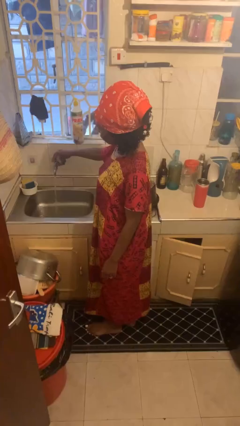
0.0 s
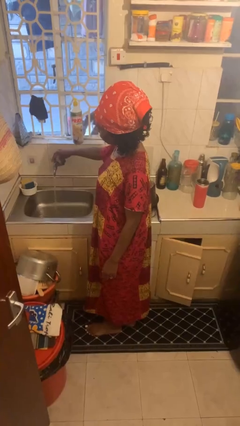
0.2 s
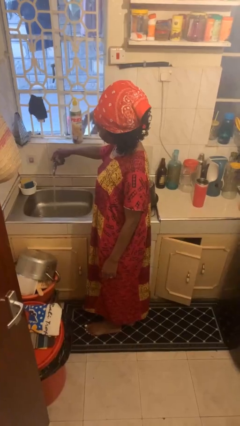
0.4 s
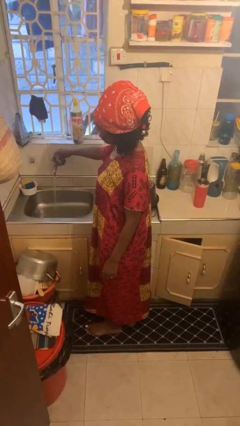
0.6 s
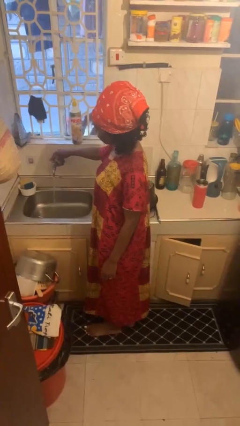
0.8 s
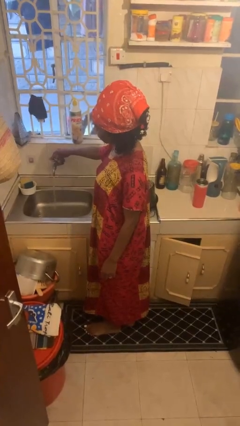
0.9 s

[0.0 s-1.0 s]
person turns on faucet

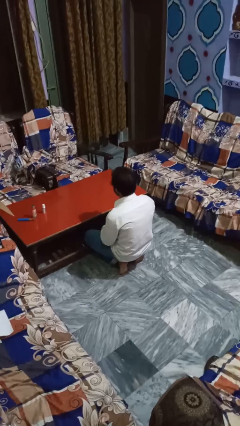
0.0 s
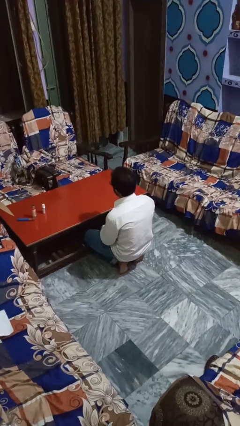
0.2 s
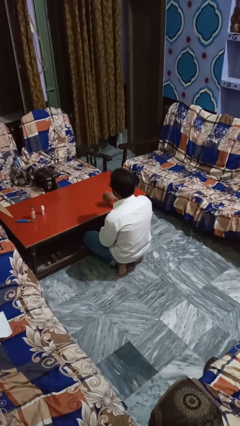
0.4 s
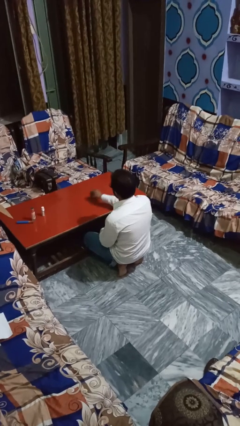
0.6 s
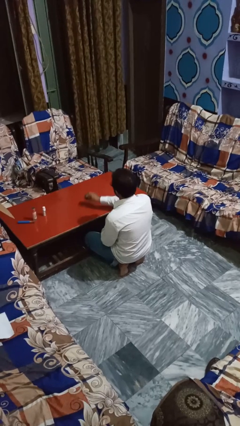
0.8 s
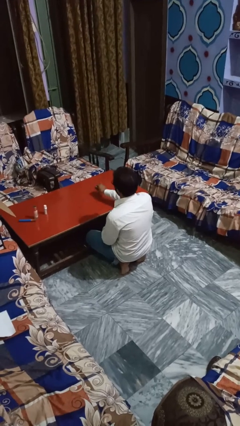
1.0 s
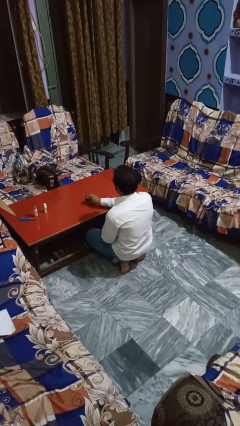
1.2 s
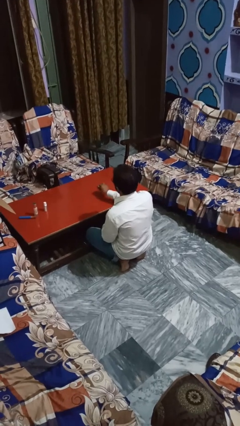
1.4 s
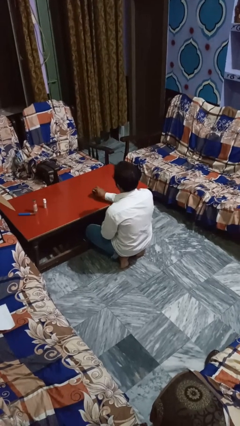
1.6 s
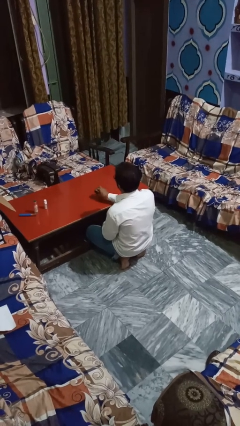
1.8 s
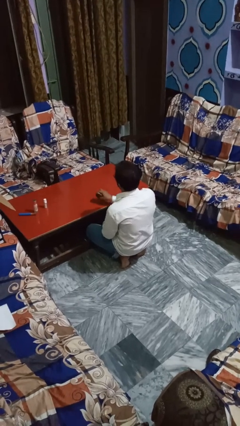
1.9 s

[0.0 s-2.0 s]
person cleans table with rag

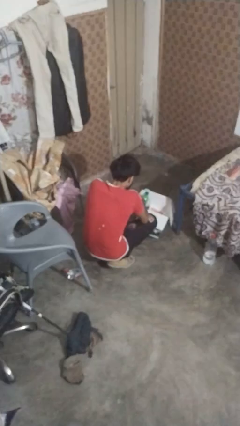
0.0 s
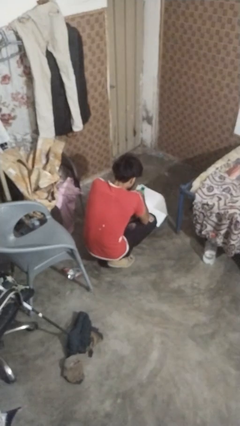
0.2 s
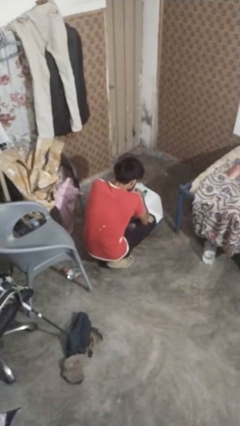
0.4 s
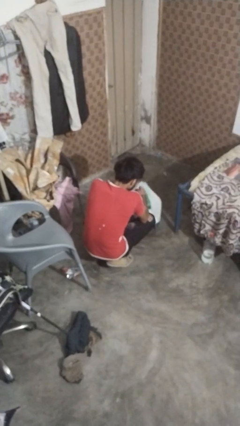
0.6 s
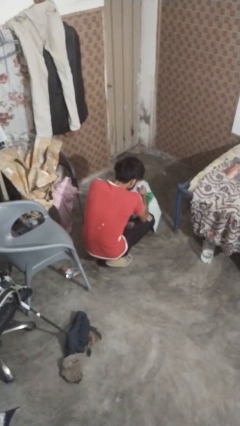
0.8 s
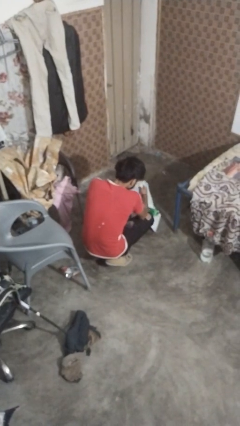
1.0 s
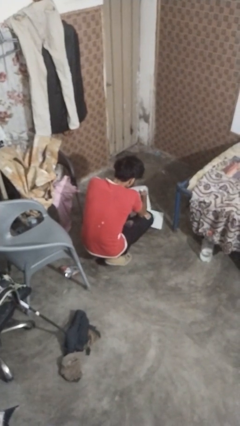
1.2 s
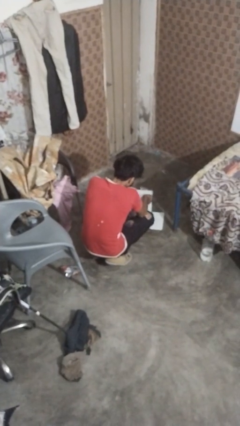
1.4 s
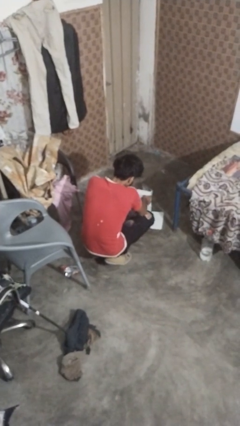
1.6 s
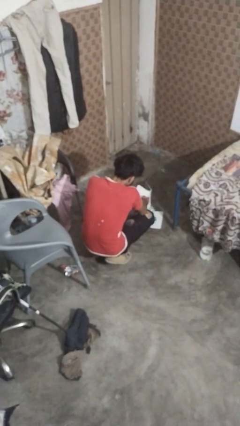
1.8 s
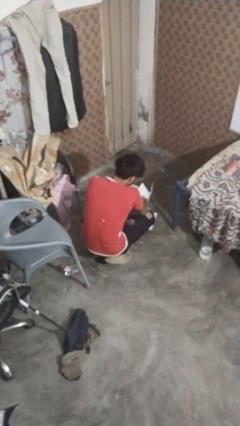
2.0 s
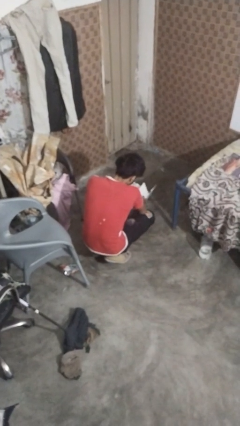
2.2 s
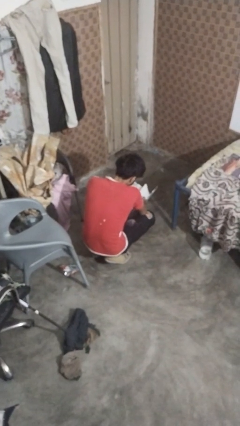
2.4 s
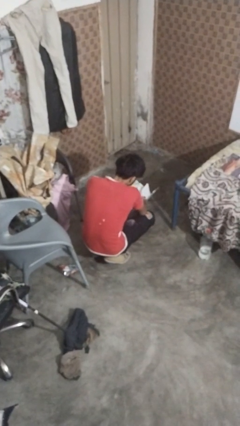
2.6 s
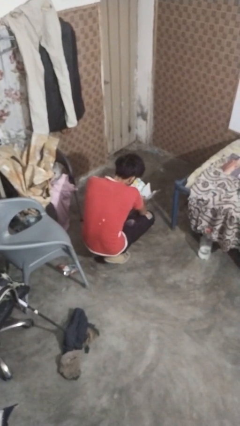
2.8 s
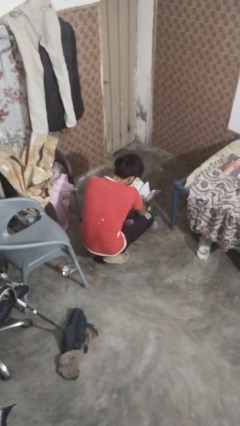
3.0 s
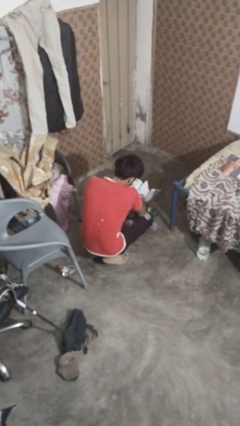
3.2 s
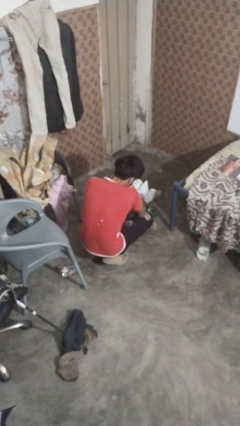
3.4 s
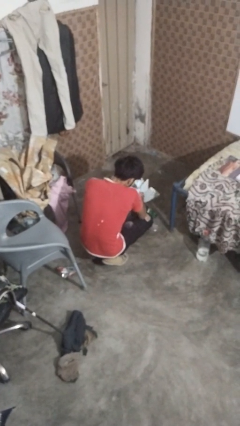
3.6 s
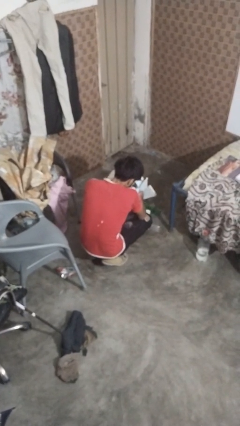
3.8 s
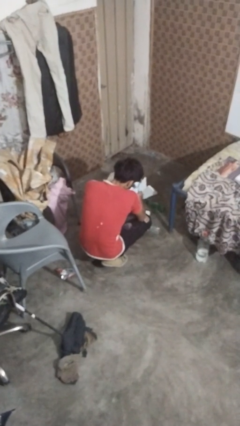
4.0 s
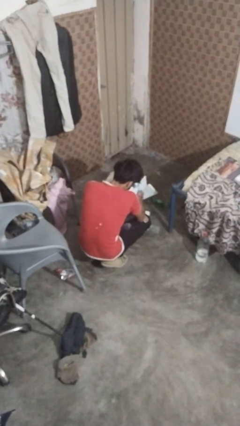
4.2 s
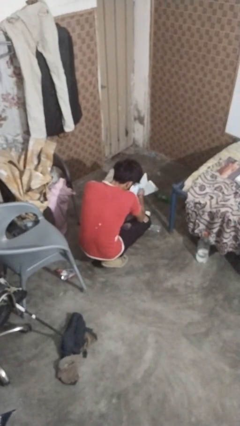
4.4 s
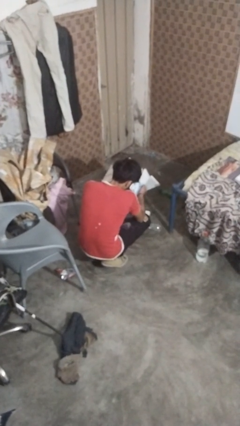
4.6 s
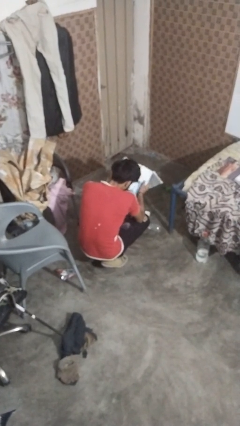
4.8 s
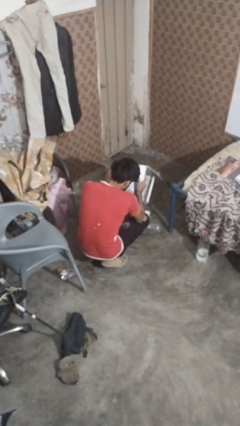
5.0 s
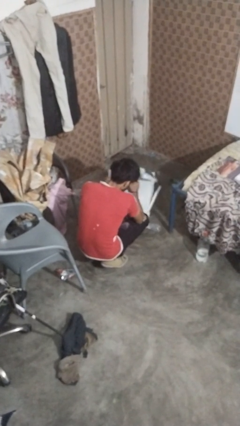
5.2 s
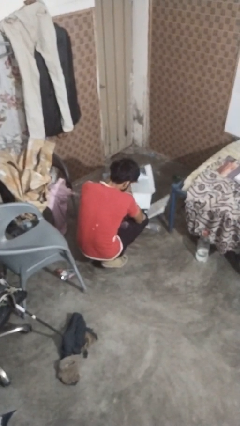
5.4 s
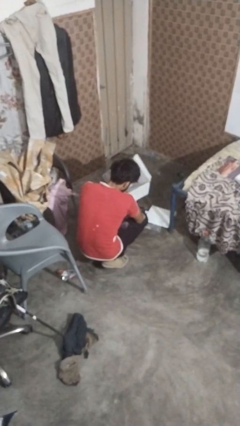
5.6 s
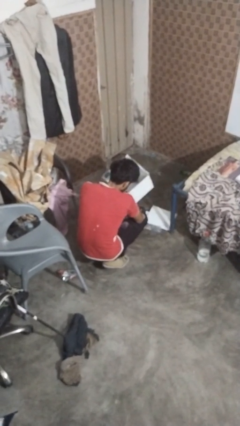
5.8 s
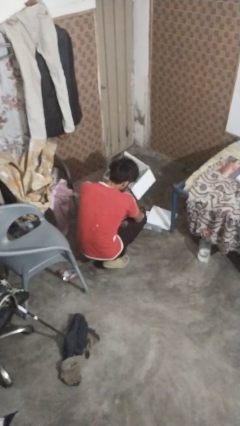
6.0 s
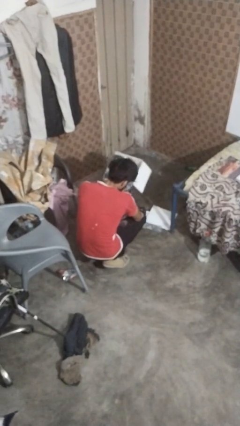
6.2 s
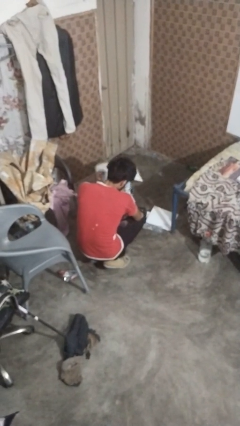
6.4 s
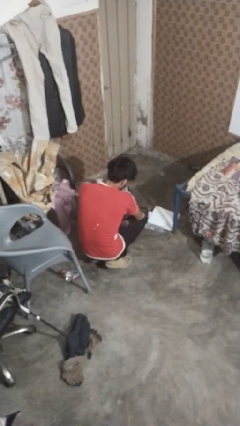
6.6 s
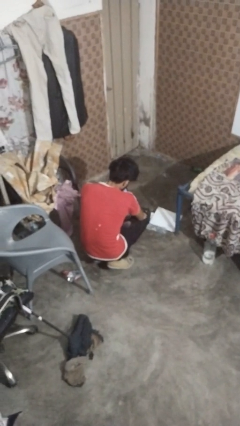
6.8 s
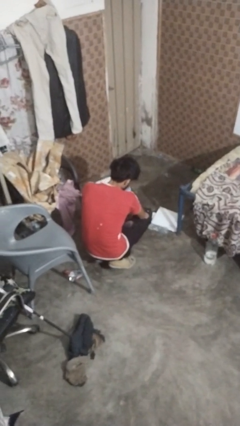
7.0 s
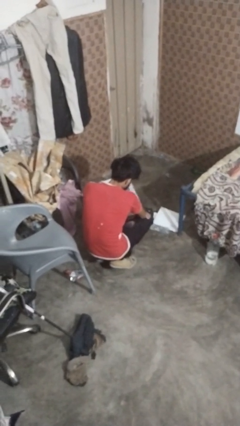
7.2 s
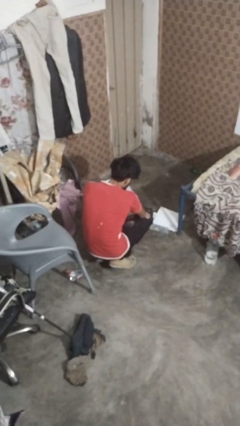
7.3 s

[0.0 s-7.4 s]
person unloads box onto floor

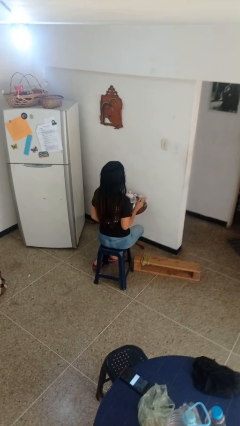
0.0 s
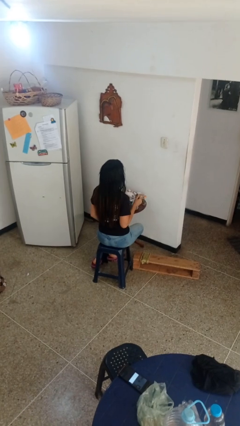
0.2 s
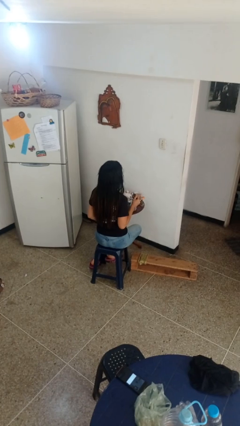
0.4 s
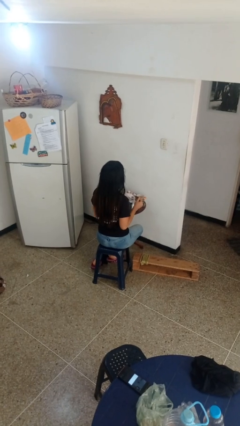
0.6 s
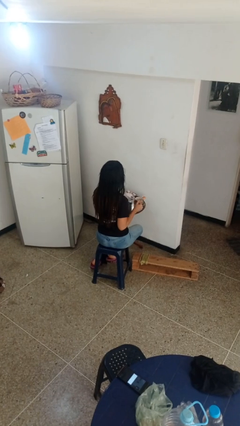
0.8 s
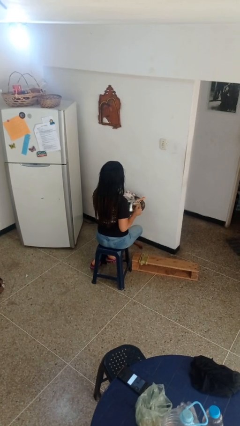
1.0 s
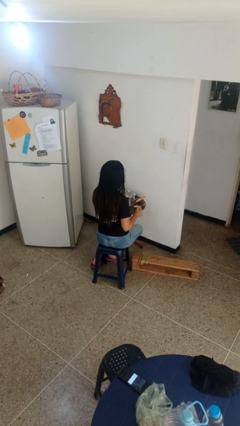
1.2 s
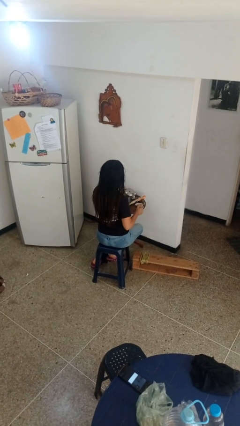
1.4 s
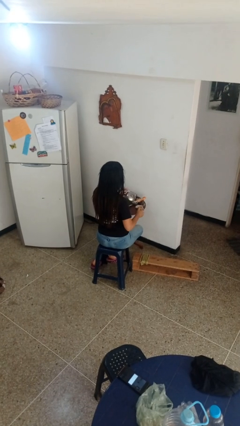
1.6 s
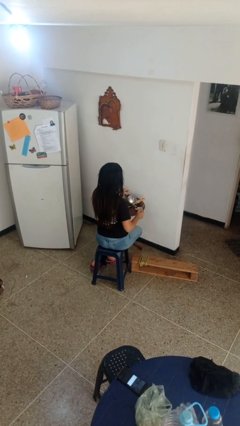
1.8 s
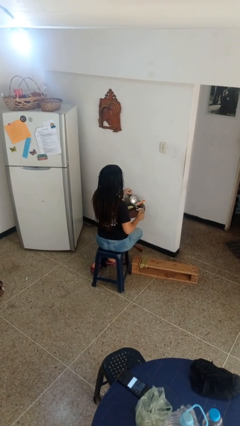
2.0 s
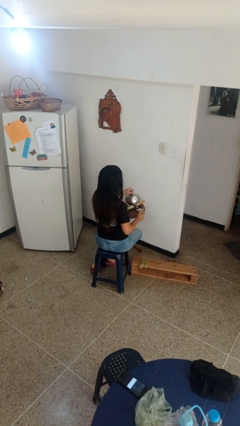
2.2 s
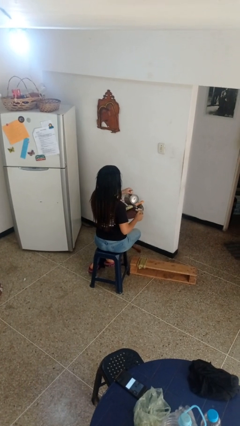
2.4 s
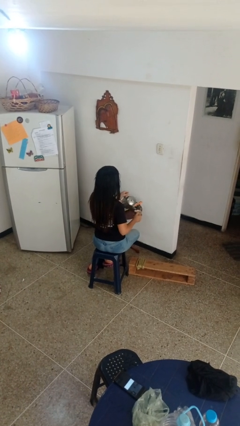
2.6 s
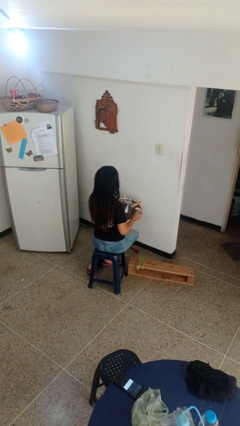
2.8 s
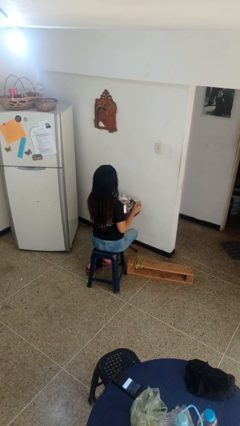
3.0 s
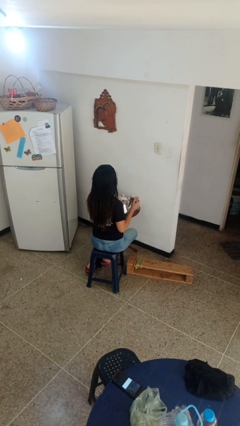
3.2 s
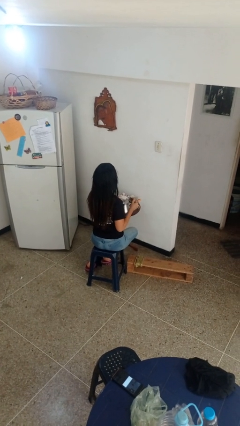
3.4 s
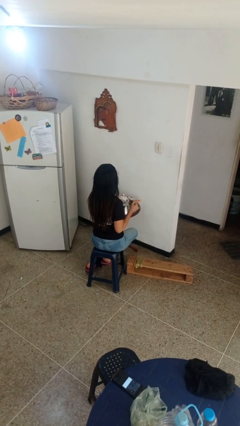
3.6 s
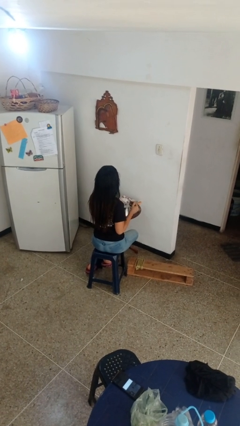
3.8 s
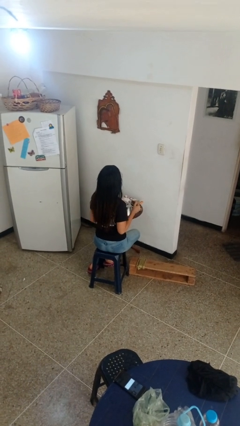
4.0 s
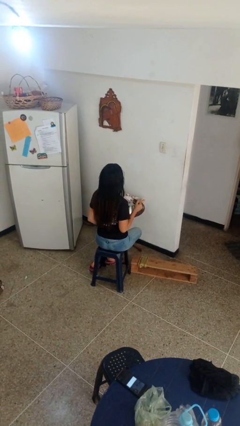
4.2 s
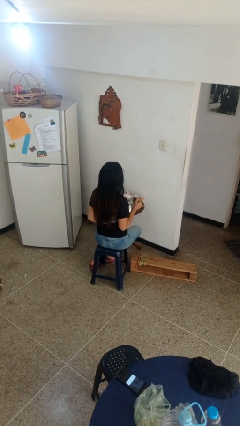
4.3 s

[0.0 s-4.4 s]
person pours coffee into mug

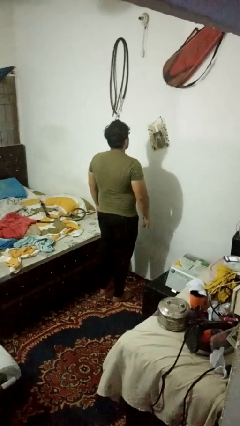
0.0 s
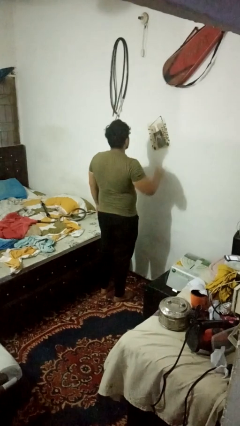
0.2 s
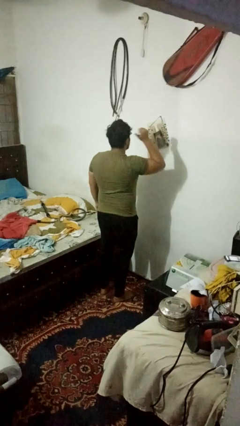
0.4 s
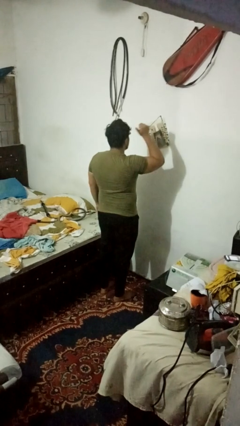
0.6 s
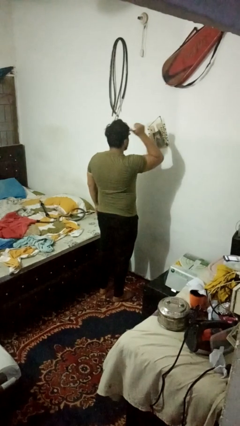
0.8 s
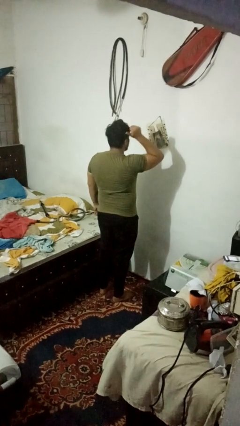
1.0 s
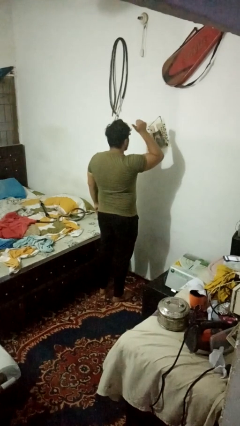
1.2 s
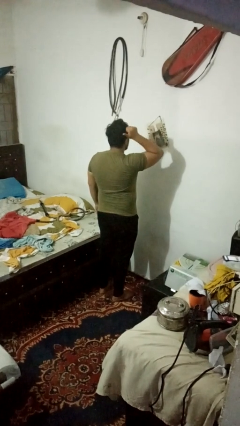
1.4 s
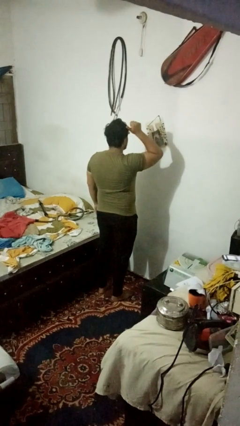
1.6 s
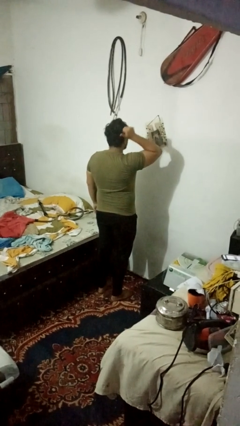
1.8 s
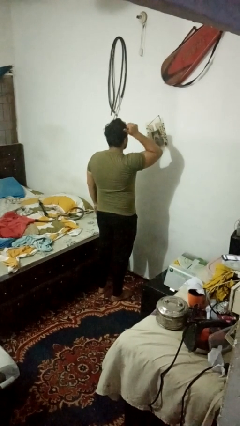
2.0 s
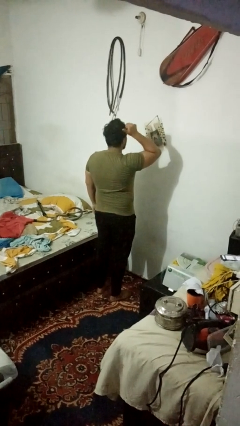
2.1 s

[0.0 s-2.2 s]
person gestures behind me

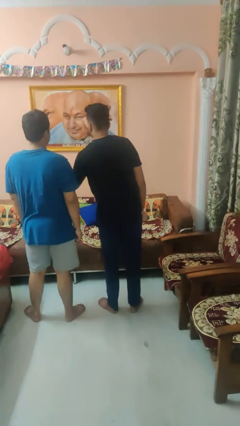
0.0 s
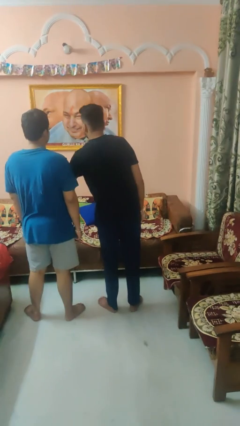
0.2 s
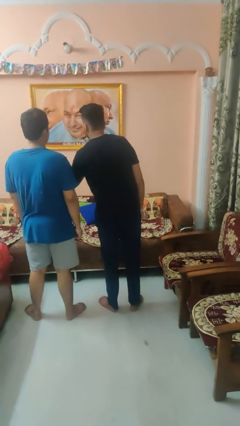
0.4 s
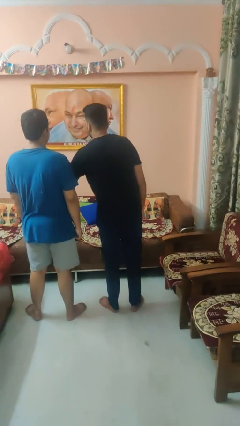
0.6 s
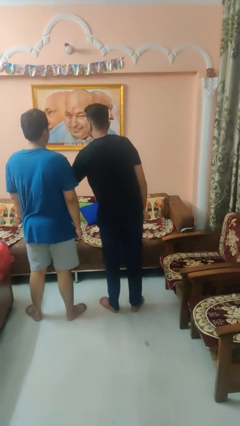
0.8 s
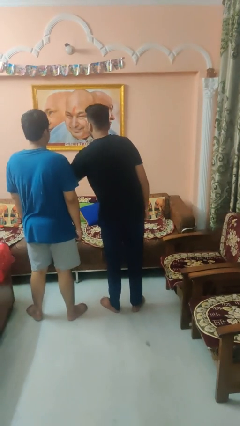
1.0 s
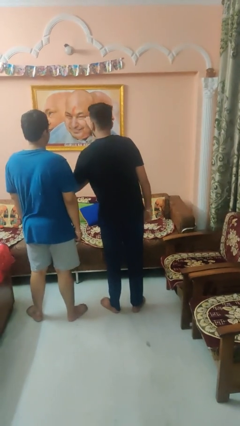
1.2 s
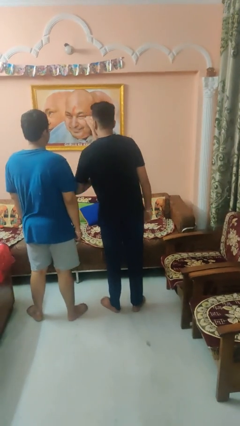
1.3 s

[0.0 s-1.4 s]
person nudges person with elbow
